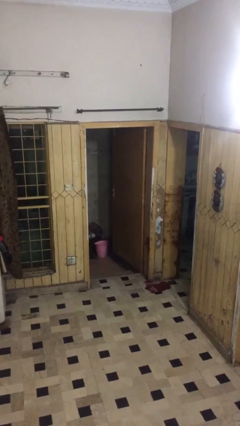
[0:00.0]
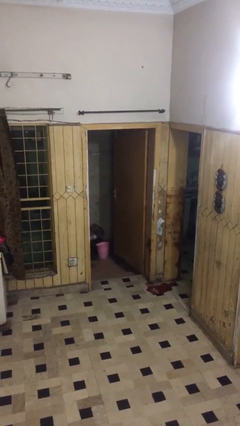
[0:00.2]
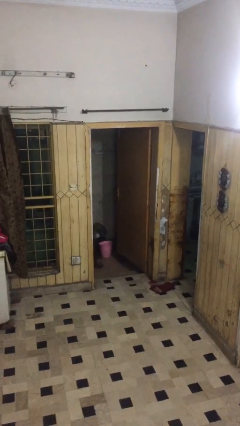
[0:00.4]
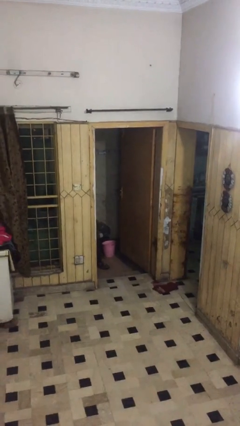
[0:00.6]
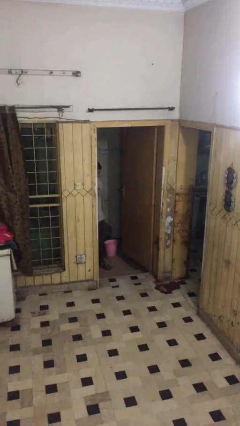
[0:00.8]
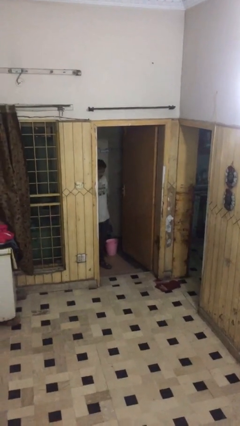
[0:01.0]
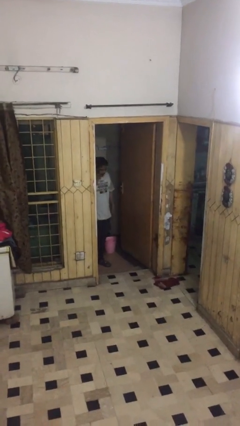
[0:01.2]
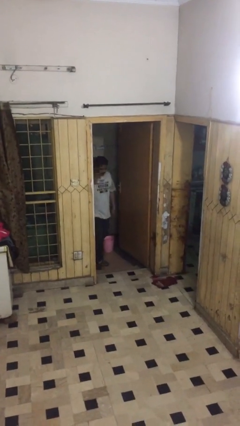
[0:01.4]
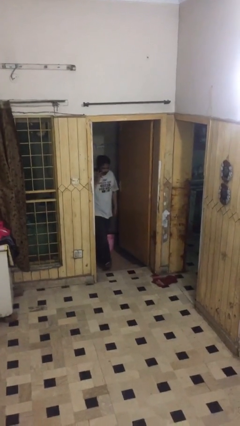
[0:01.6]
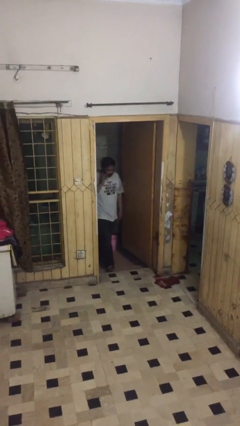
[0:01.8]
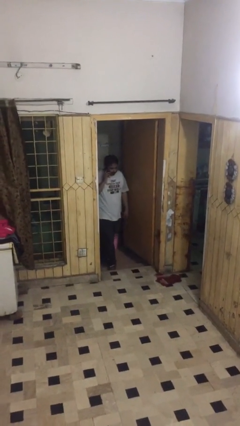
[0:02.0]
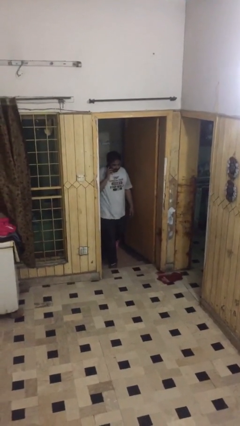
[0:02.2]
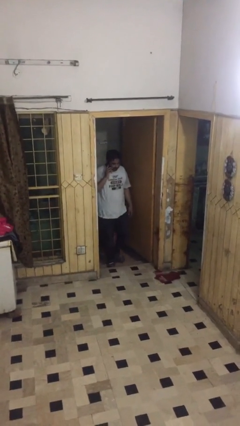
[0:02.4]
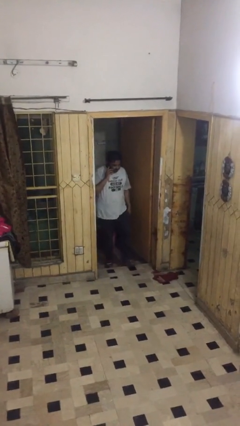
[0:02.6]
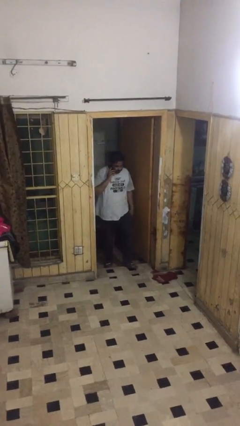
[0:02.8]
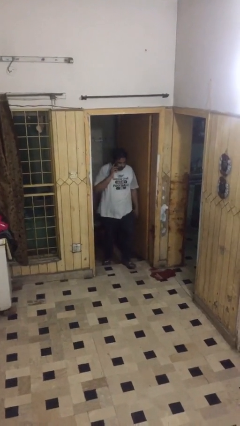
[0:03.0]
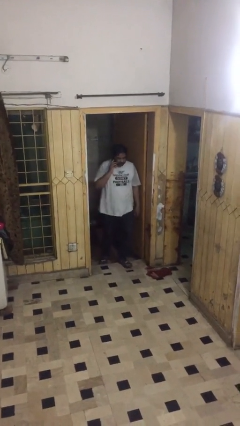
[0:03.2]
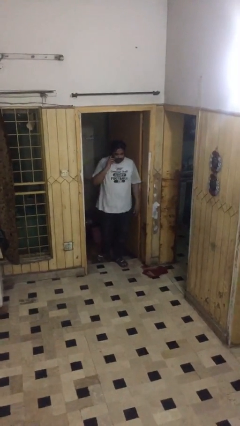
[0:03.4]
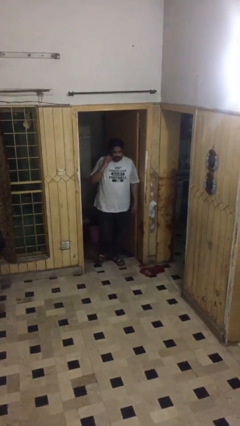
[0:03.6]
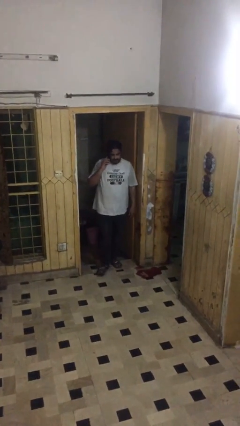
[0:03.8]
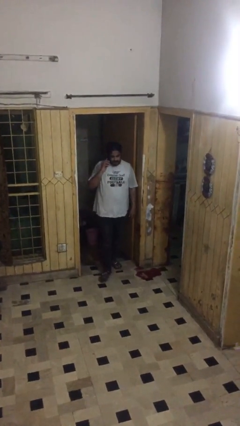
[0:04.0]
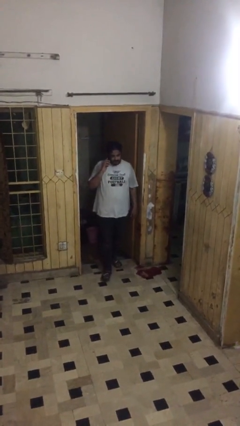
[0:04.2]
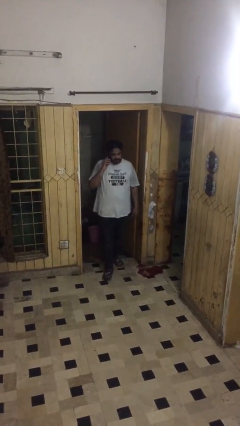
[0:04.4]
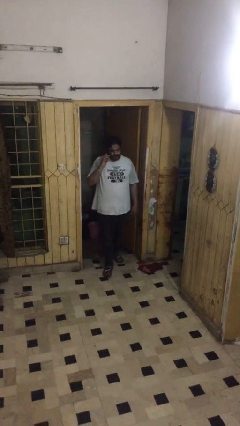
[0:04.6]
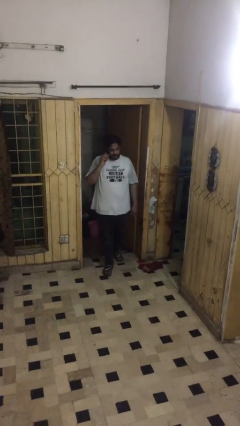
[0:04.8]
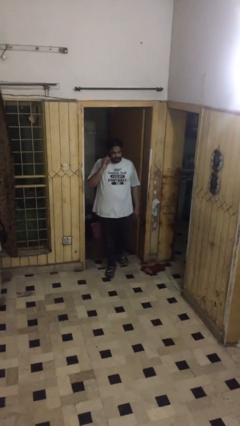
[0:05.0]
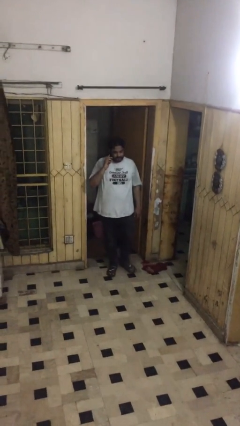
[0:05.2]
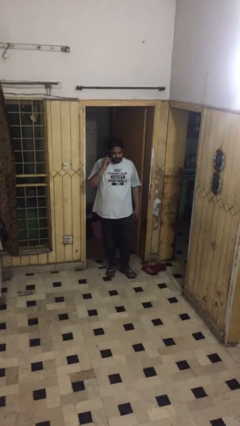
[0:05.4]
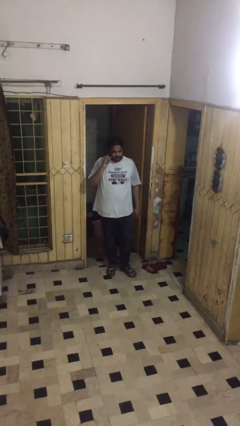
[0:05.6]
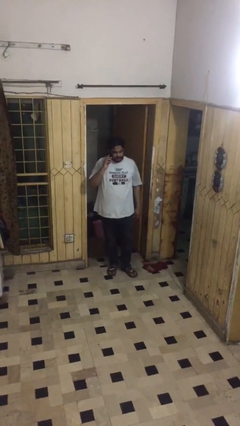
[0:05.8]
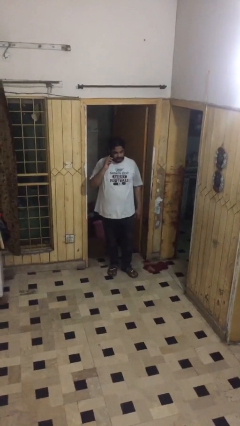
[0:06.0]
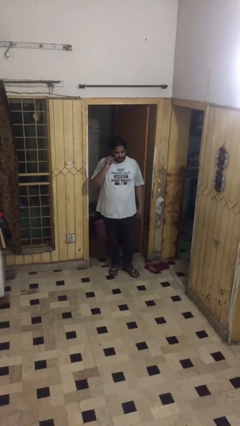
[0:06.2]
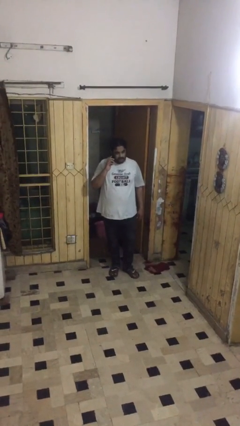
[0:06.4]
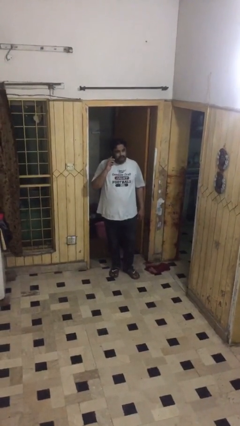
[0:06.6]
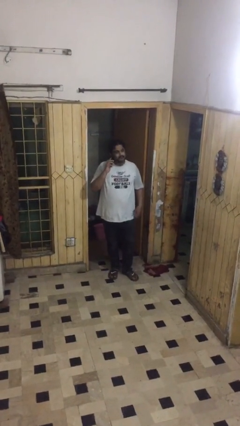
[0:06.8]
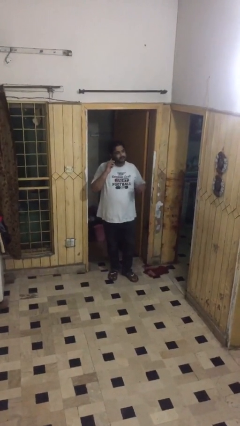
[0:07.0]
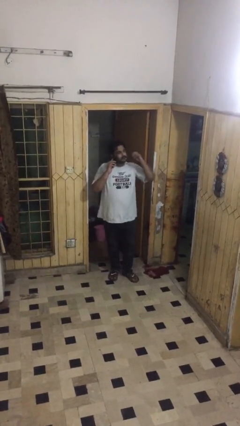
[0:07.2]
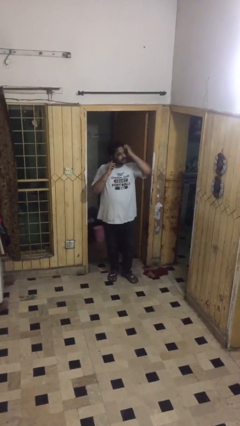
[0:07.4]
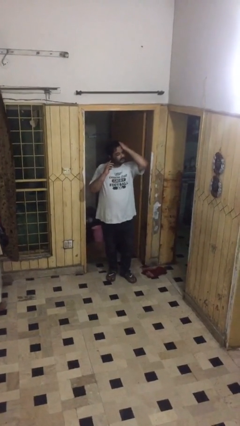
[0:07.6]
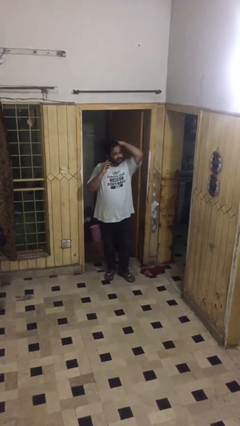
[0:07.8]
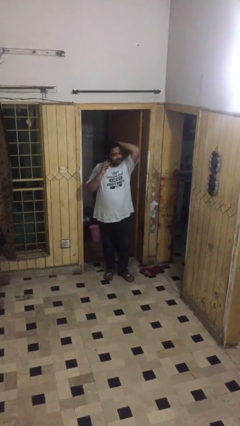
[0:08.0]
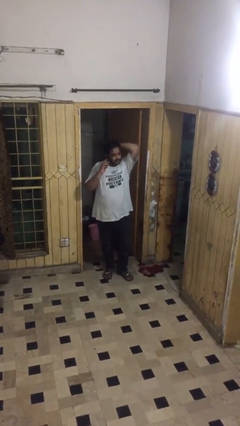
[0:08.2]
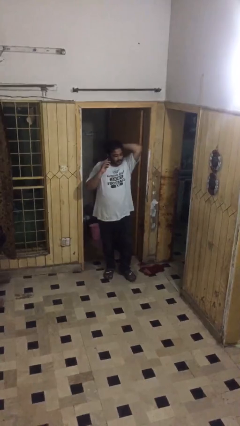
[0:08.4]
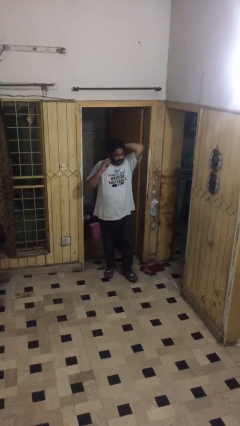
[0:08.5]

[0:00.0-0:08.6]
person enters scene through structure

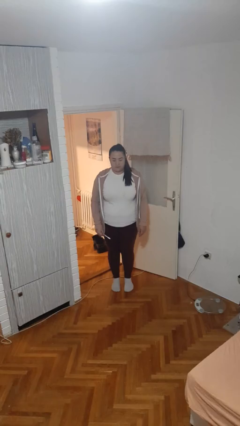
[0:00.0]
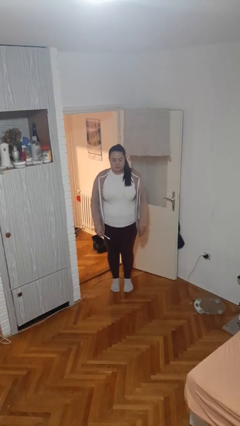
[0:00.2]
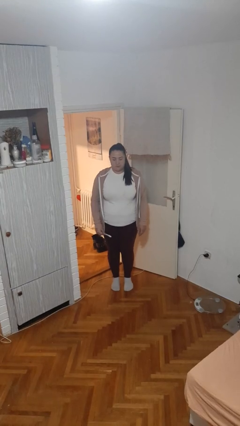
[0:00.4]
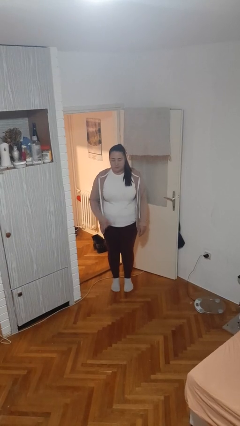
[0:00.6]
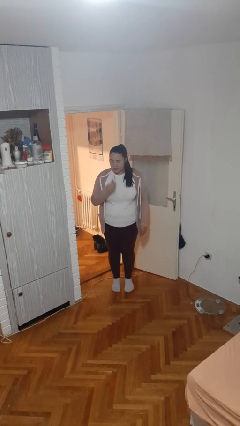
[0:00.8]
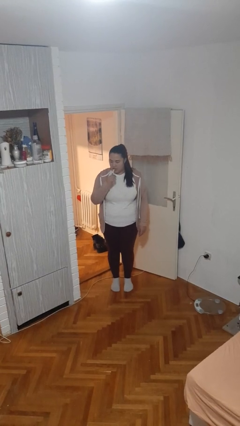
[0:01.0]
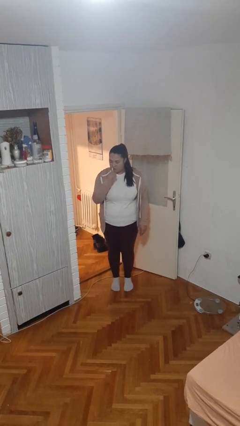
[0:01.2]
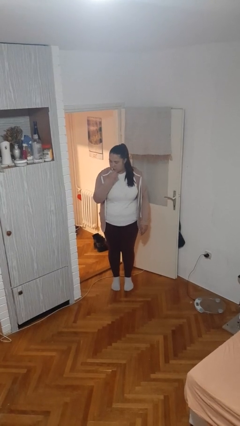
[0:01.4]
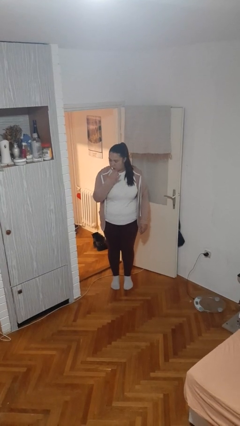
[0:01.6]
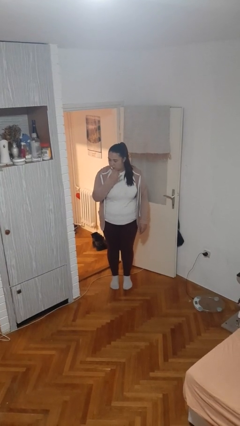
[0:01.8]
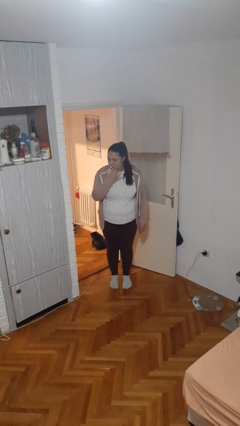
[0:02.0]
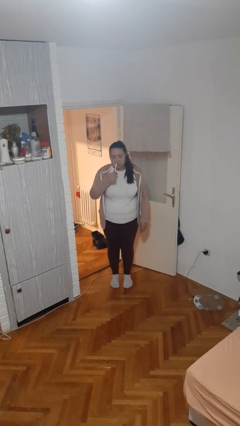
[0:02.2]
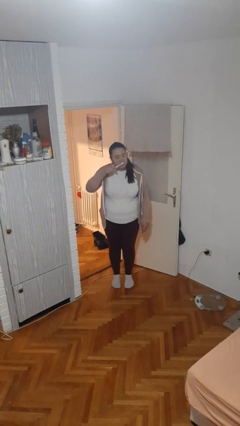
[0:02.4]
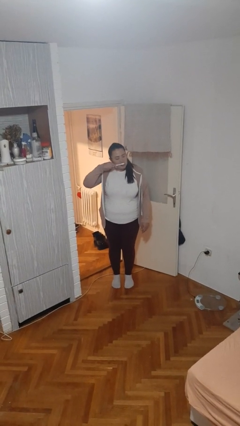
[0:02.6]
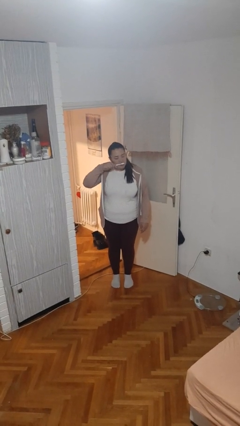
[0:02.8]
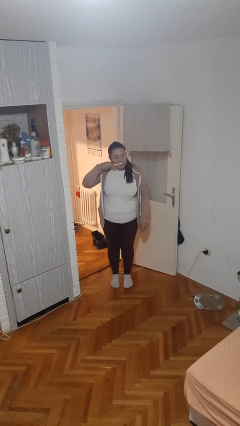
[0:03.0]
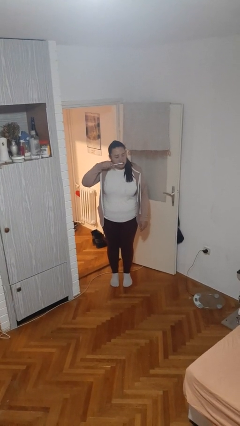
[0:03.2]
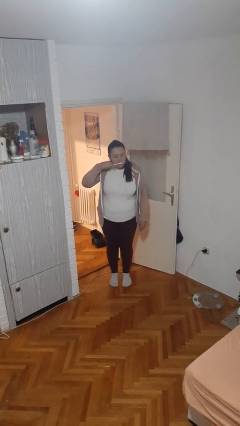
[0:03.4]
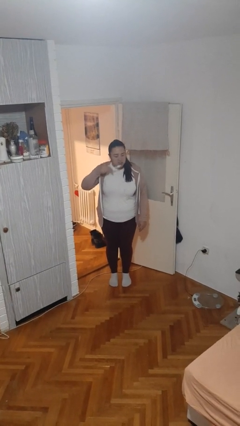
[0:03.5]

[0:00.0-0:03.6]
person brushes hair

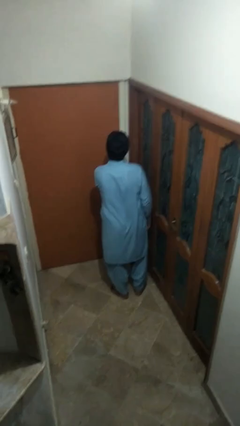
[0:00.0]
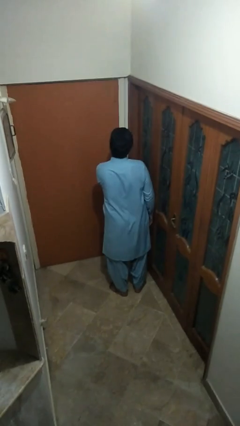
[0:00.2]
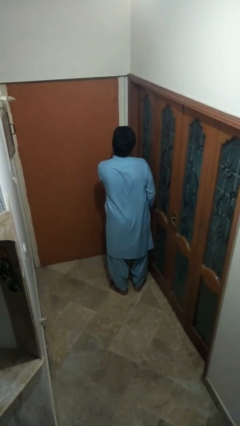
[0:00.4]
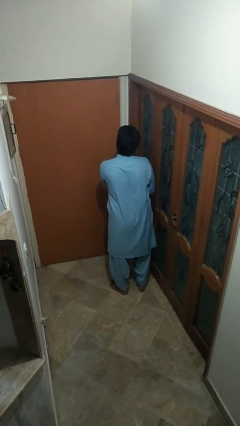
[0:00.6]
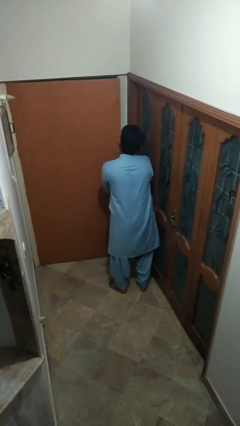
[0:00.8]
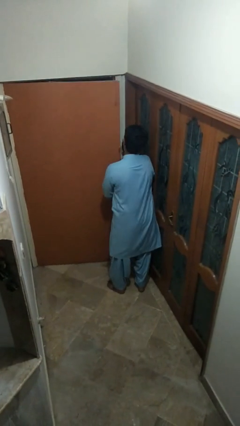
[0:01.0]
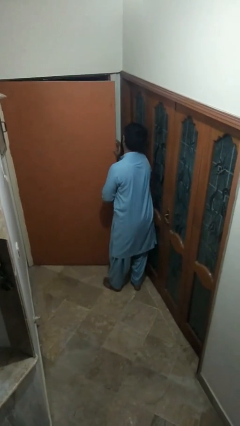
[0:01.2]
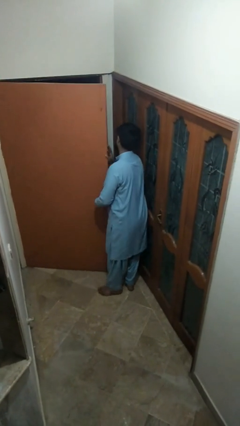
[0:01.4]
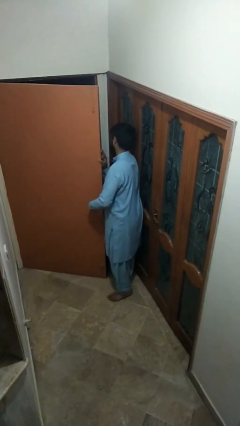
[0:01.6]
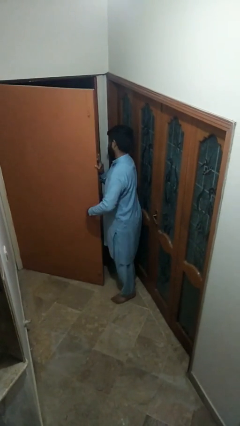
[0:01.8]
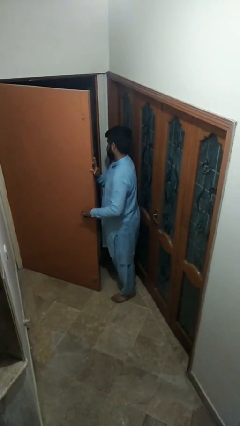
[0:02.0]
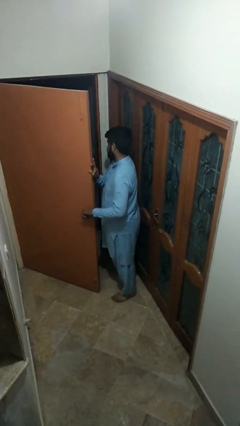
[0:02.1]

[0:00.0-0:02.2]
person opens facility door

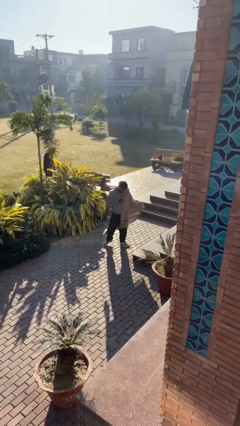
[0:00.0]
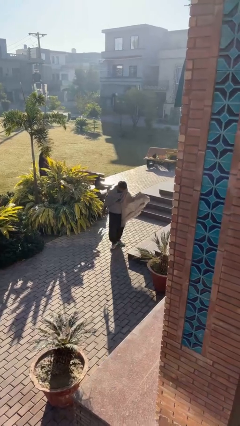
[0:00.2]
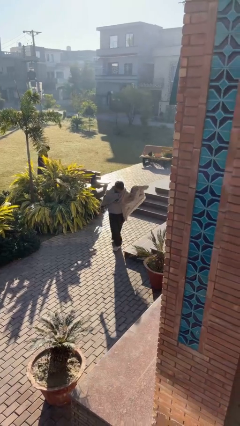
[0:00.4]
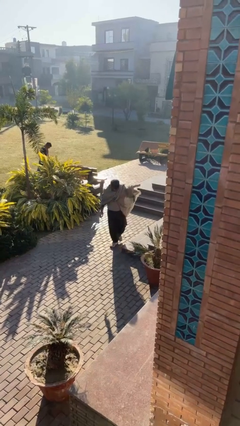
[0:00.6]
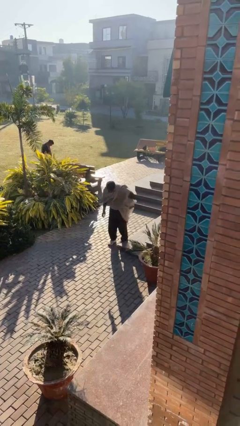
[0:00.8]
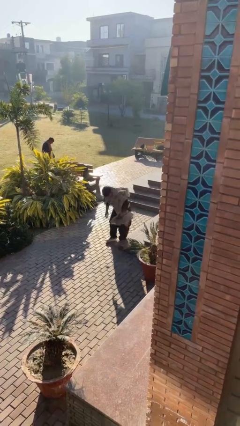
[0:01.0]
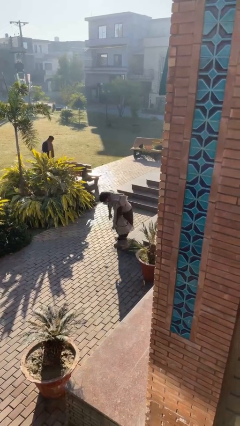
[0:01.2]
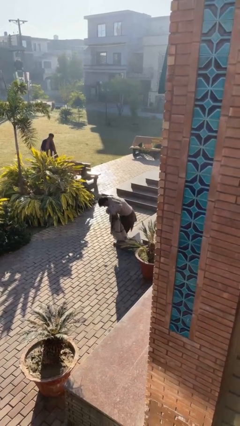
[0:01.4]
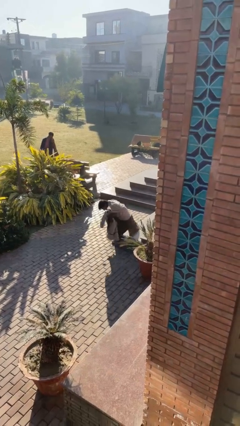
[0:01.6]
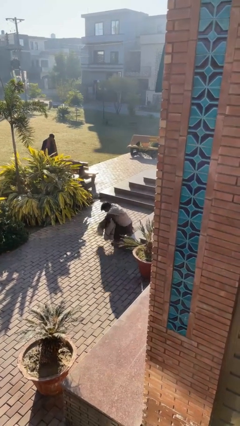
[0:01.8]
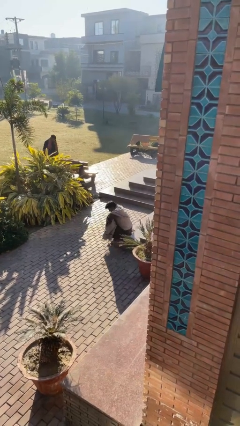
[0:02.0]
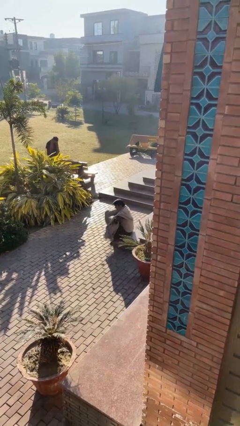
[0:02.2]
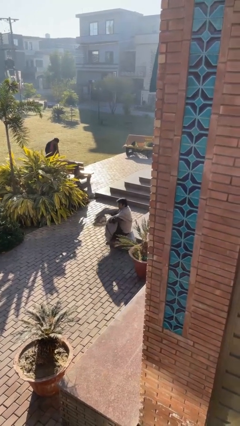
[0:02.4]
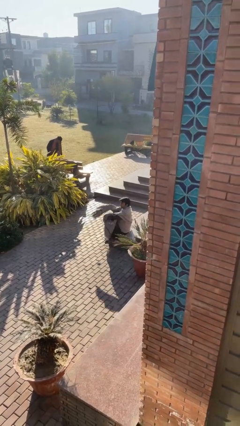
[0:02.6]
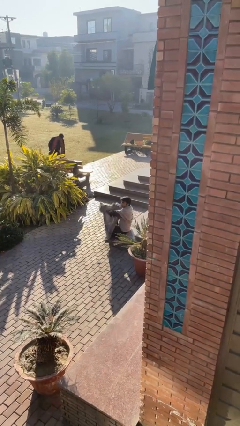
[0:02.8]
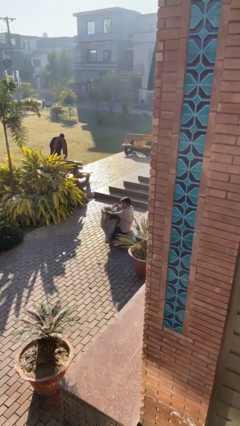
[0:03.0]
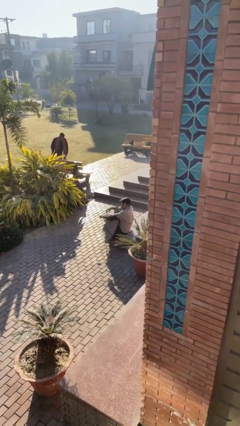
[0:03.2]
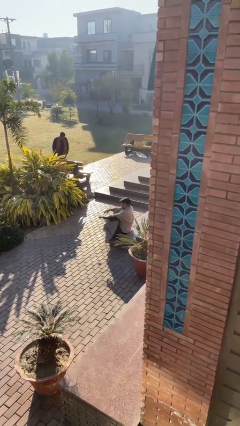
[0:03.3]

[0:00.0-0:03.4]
person sits down

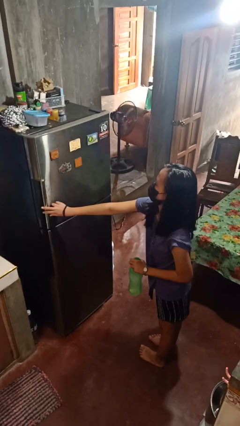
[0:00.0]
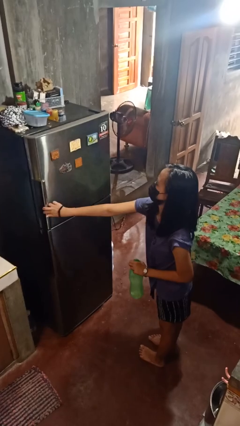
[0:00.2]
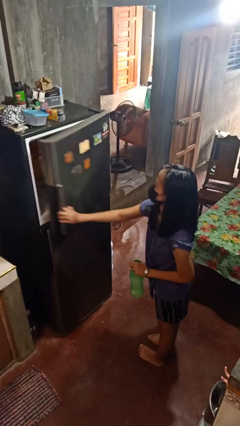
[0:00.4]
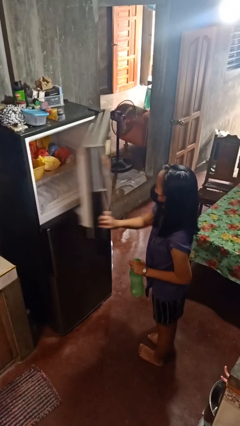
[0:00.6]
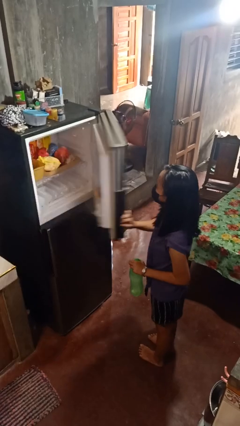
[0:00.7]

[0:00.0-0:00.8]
person opens refrigerator
